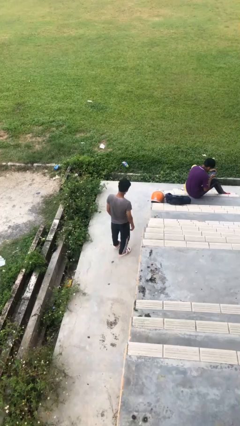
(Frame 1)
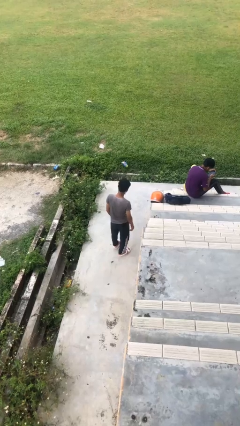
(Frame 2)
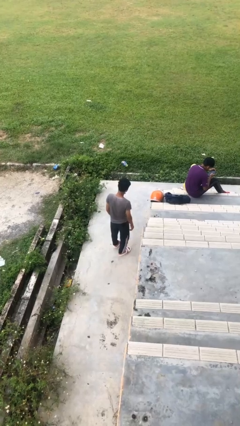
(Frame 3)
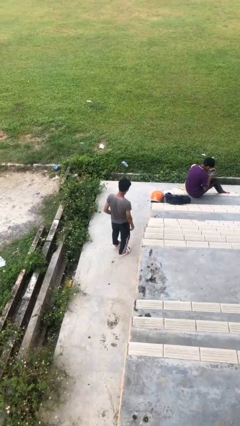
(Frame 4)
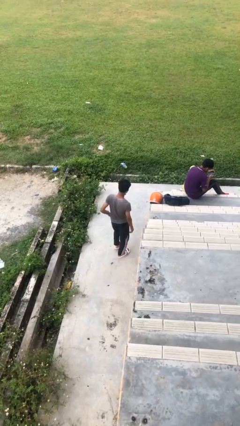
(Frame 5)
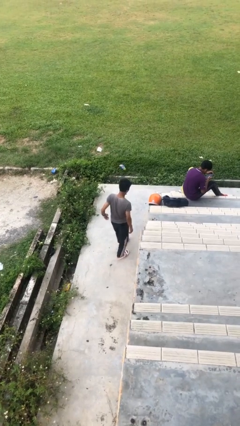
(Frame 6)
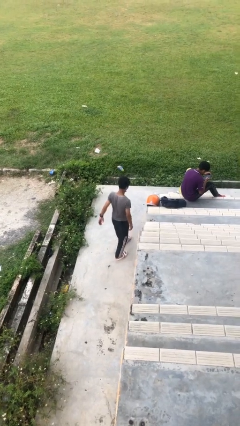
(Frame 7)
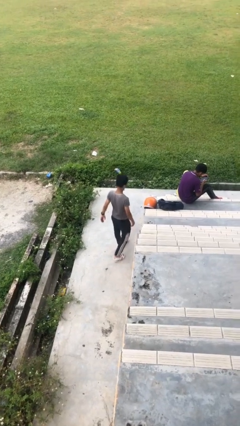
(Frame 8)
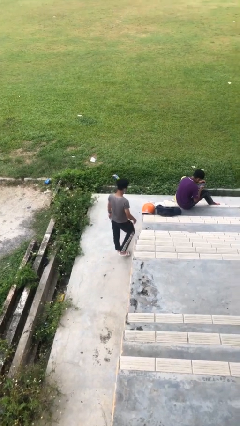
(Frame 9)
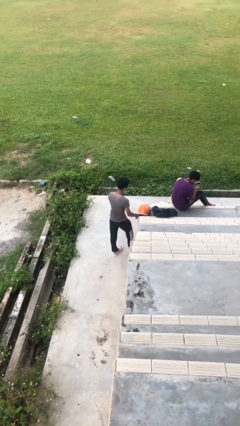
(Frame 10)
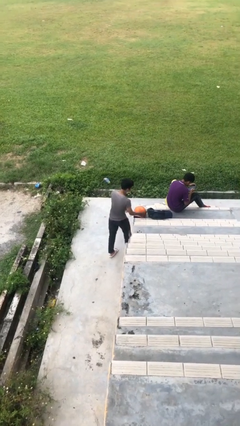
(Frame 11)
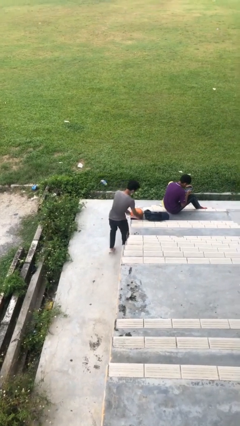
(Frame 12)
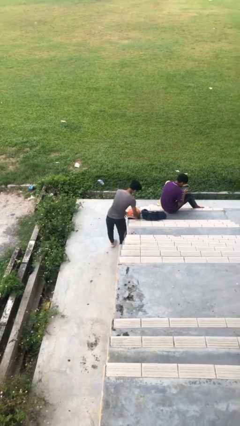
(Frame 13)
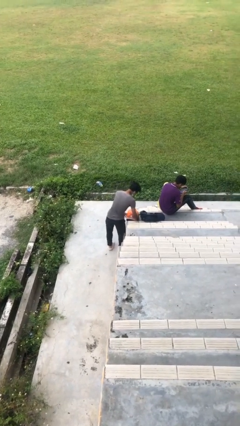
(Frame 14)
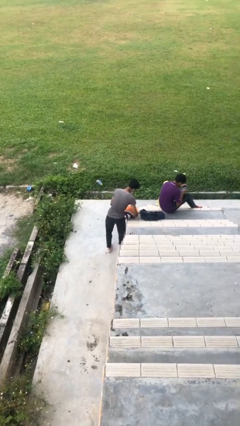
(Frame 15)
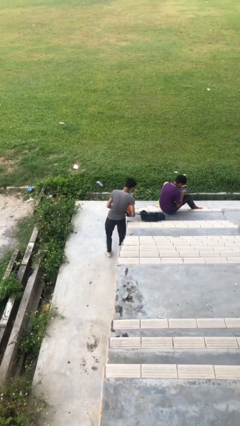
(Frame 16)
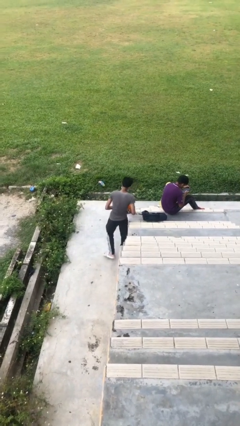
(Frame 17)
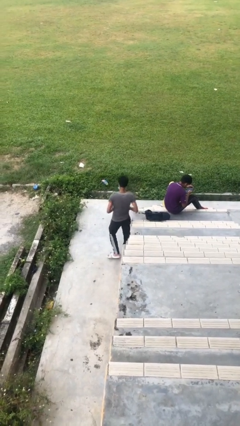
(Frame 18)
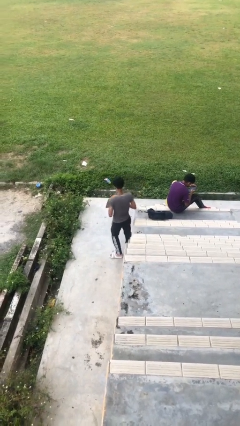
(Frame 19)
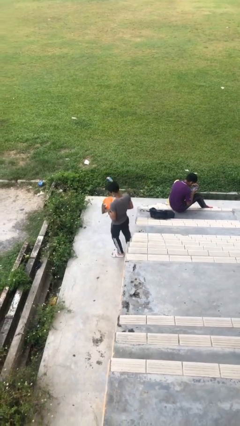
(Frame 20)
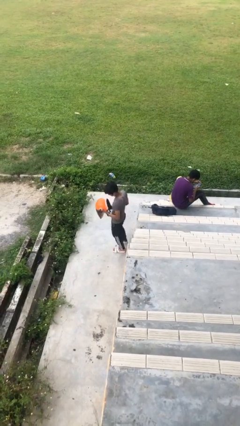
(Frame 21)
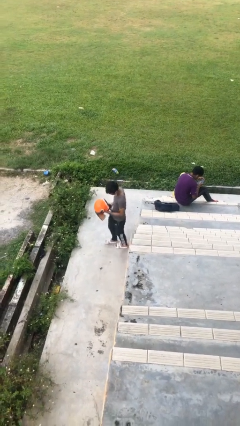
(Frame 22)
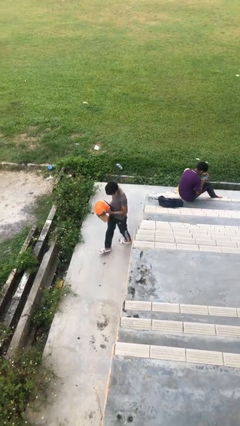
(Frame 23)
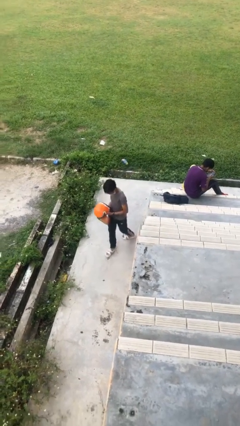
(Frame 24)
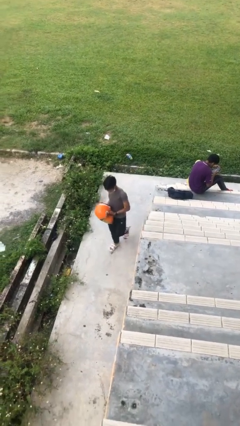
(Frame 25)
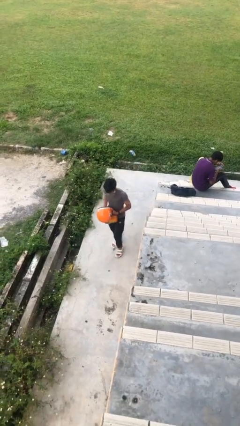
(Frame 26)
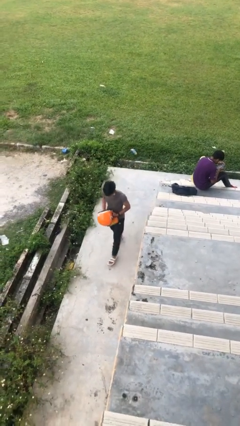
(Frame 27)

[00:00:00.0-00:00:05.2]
person steals object from person

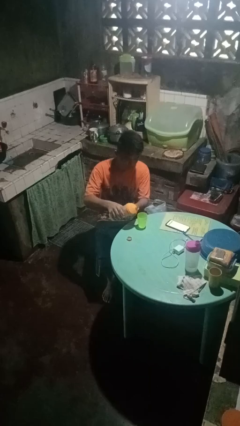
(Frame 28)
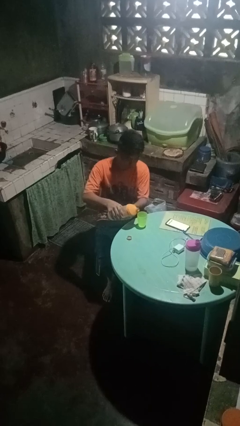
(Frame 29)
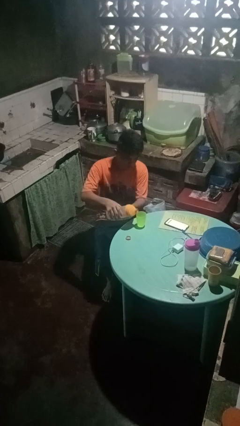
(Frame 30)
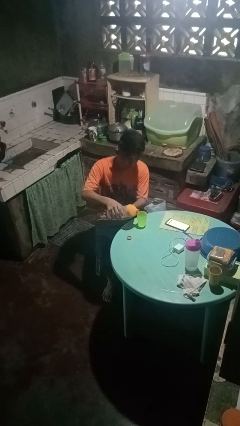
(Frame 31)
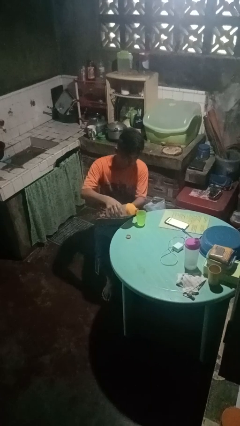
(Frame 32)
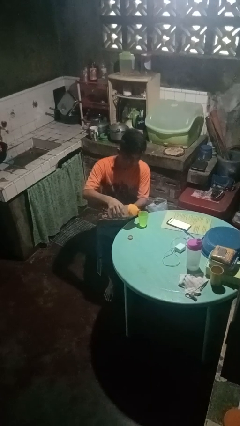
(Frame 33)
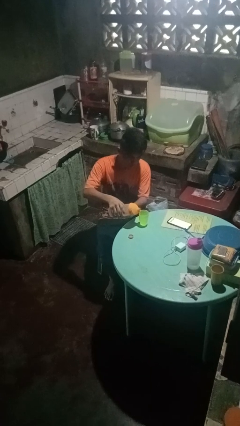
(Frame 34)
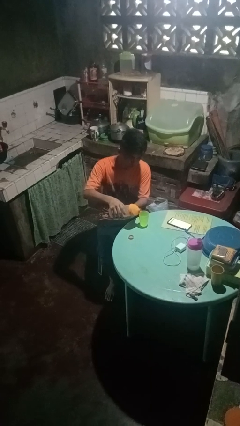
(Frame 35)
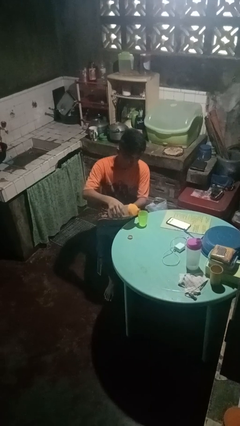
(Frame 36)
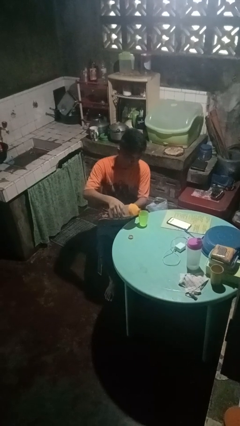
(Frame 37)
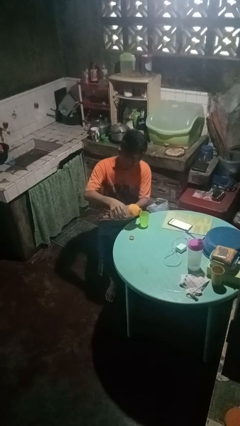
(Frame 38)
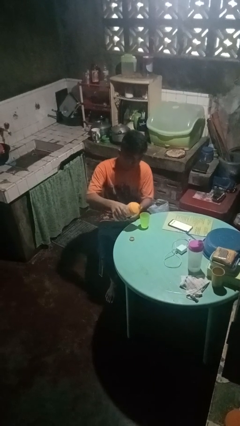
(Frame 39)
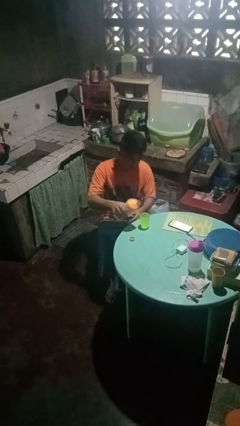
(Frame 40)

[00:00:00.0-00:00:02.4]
person pours liquid into cup

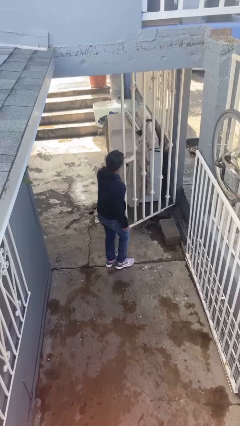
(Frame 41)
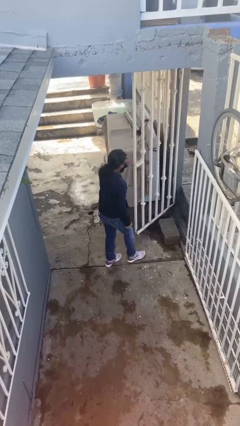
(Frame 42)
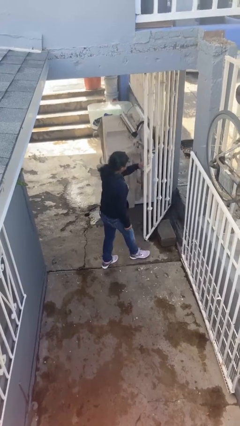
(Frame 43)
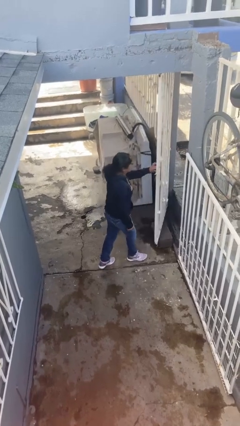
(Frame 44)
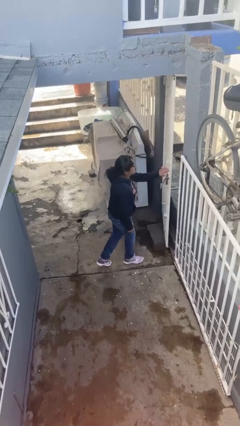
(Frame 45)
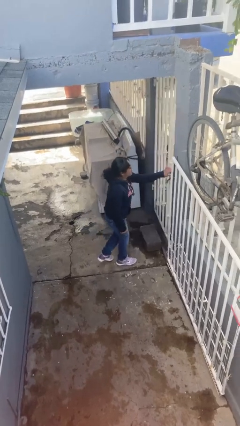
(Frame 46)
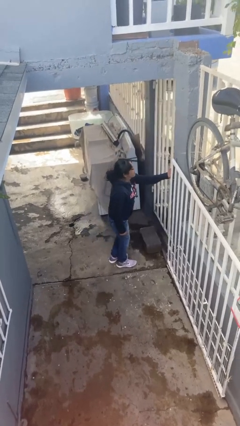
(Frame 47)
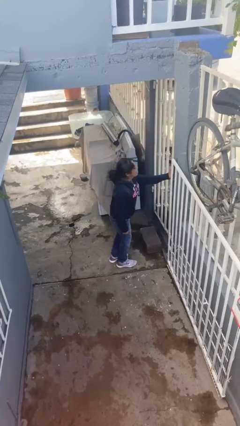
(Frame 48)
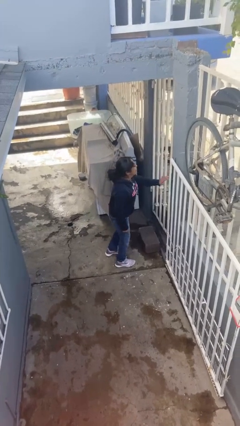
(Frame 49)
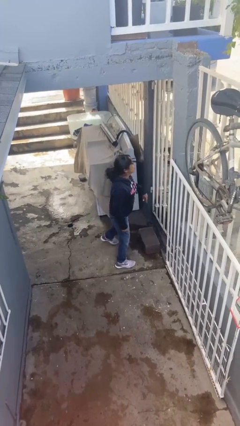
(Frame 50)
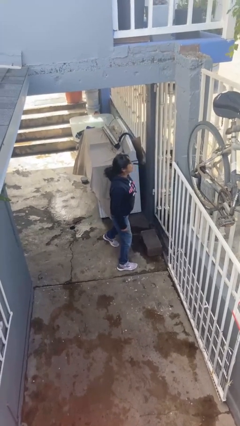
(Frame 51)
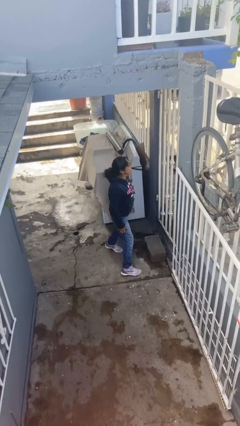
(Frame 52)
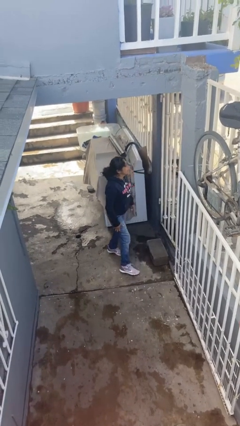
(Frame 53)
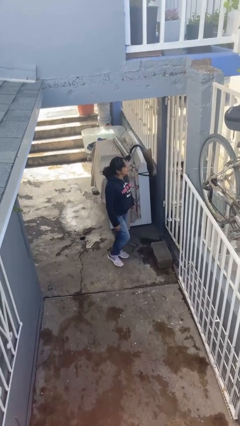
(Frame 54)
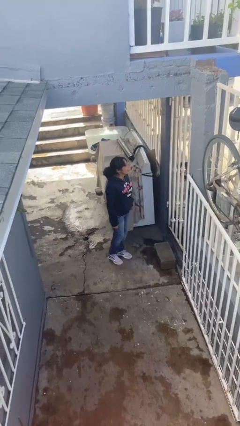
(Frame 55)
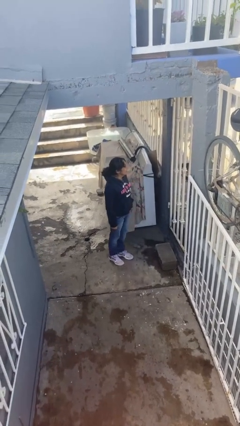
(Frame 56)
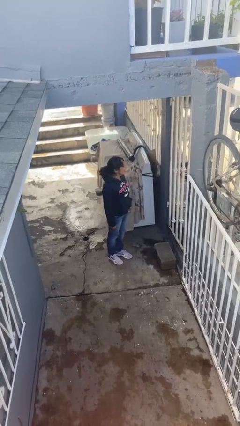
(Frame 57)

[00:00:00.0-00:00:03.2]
person closes facility door

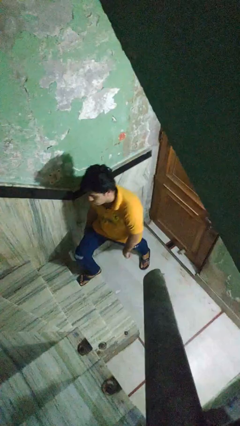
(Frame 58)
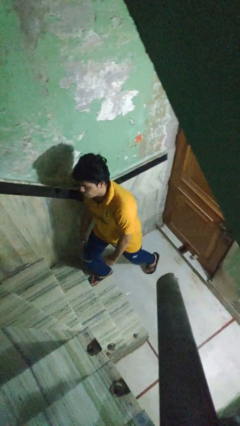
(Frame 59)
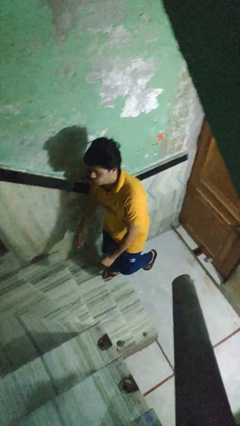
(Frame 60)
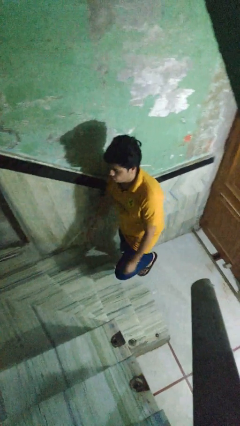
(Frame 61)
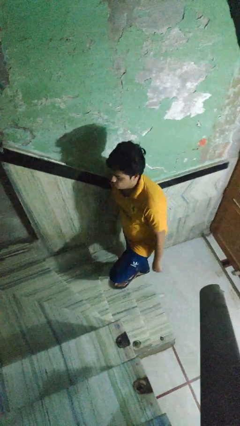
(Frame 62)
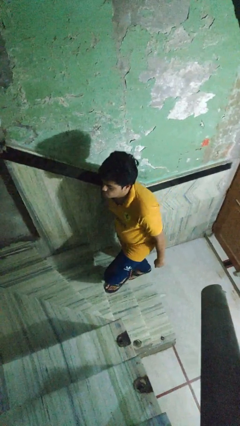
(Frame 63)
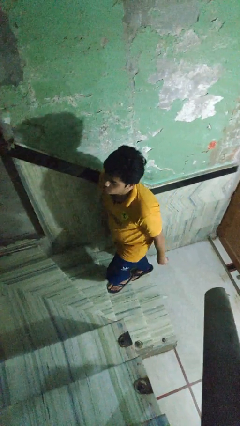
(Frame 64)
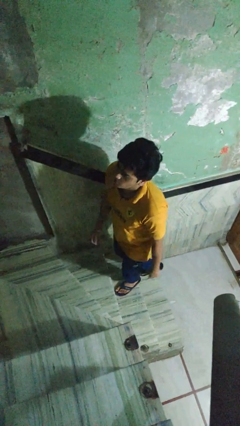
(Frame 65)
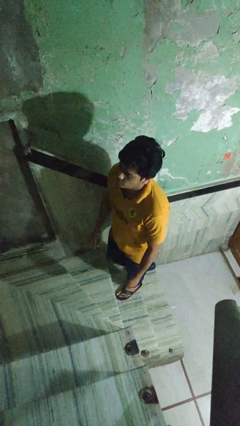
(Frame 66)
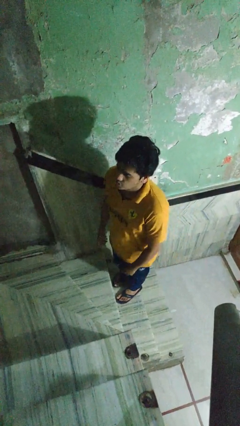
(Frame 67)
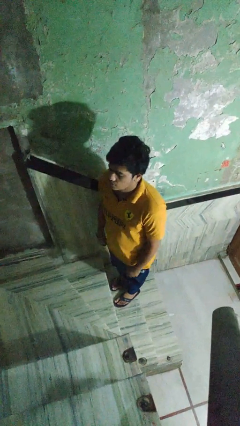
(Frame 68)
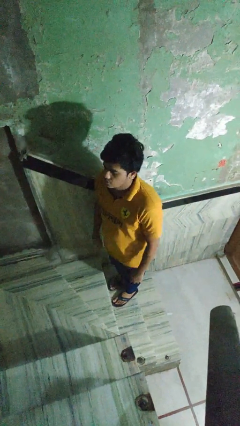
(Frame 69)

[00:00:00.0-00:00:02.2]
person climbs up stairs

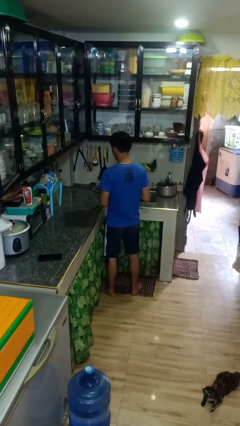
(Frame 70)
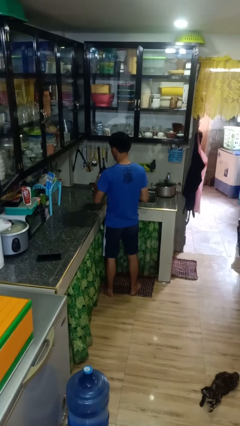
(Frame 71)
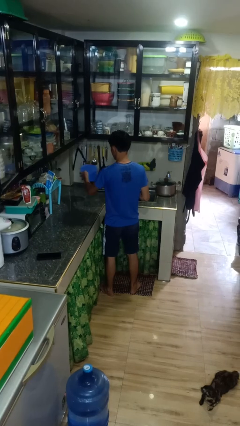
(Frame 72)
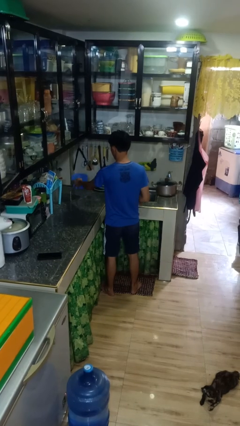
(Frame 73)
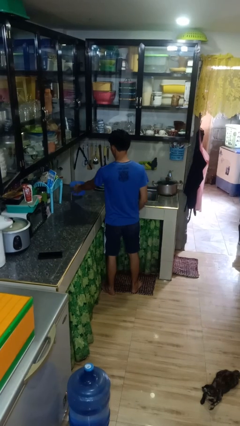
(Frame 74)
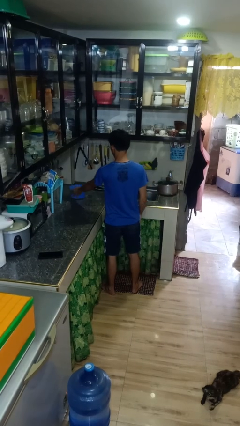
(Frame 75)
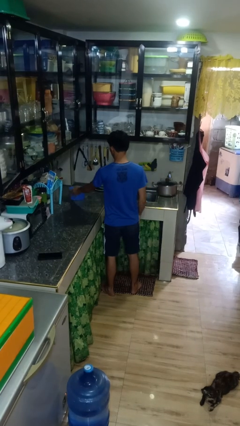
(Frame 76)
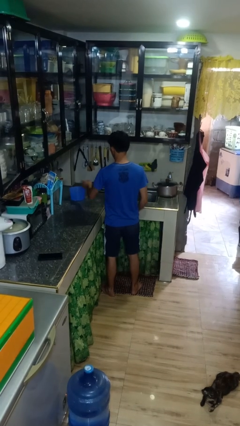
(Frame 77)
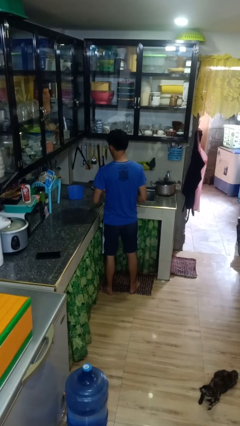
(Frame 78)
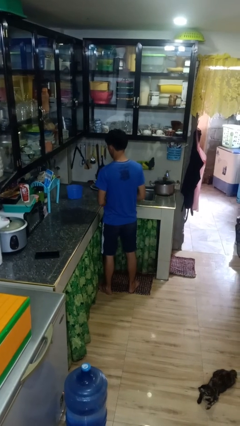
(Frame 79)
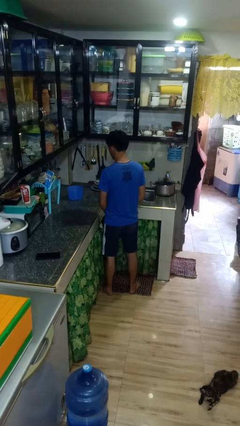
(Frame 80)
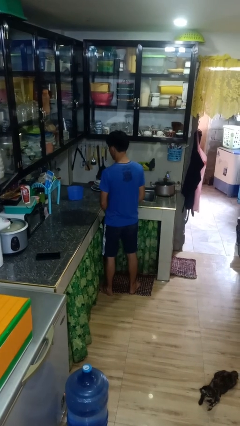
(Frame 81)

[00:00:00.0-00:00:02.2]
person puts down object on countertop

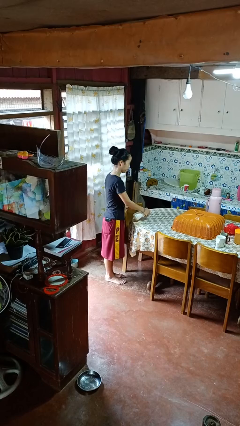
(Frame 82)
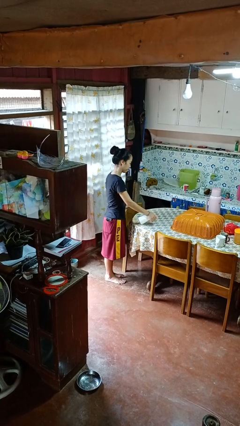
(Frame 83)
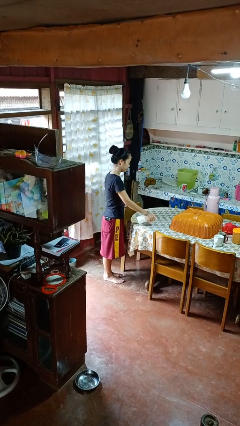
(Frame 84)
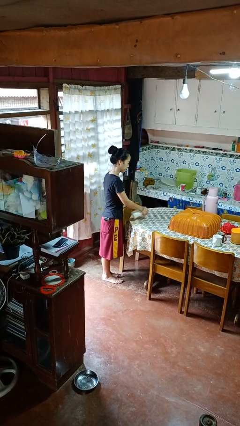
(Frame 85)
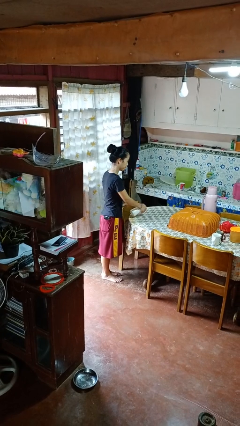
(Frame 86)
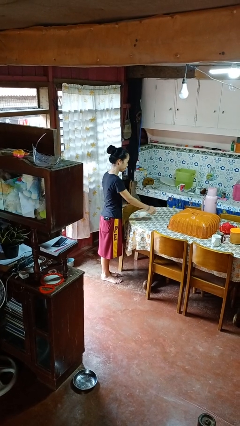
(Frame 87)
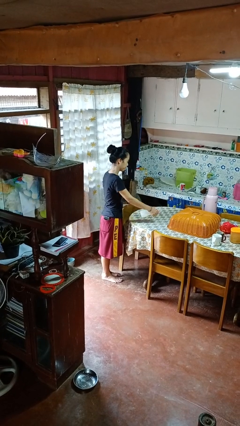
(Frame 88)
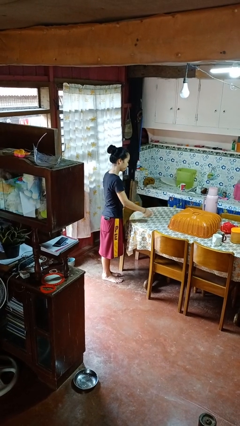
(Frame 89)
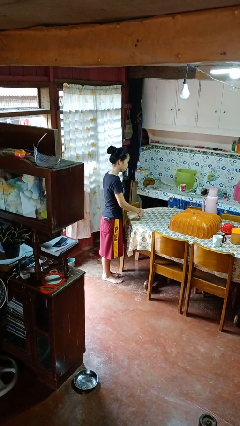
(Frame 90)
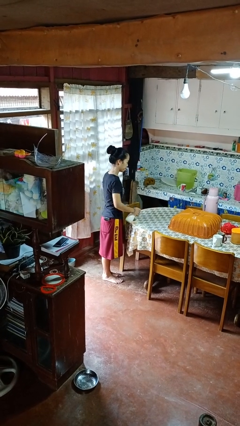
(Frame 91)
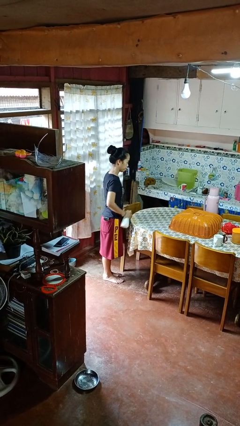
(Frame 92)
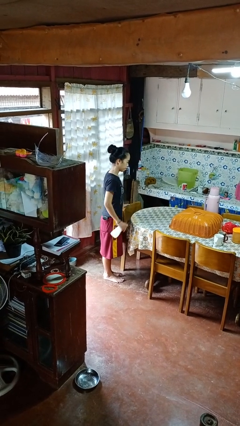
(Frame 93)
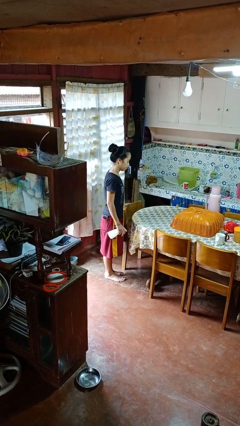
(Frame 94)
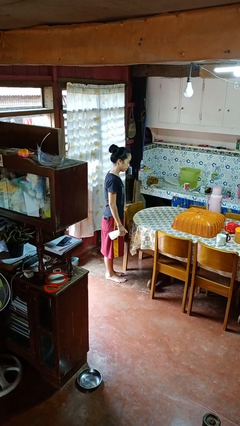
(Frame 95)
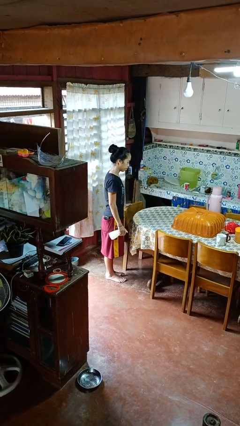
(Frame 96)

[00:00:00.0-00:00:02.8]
person sprays from bottle
